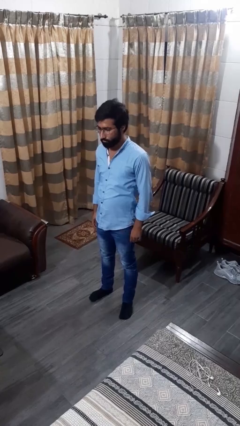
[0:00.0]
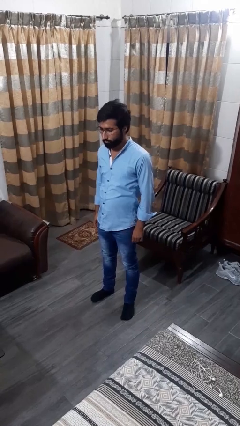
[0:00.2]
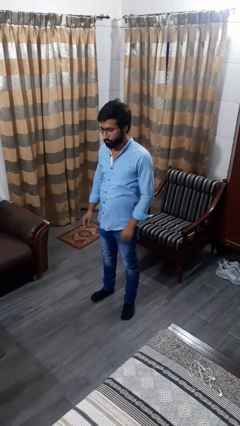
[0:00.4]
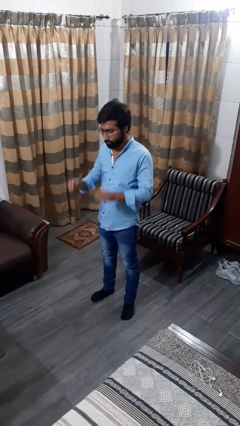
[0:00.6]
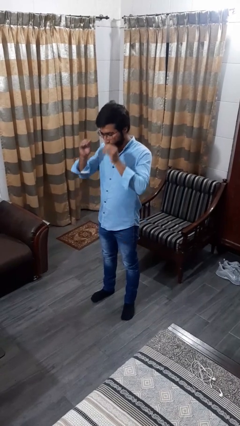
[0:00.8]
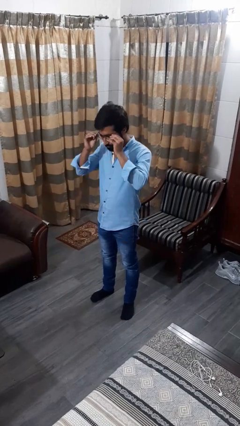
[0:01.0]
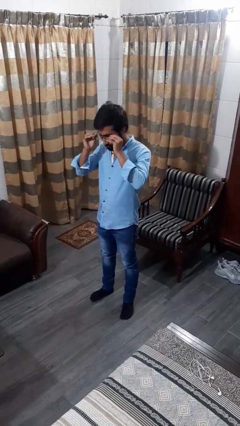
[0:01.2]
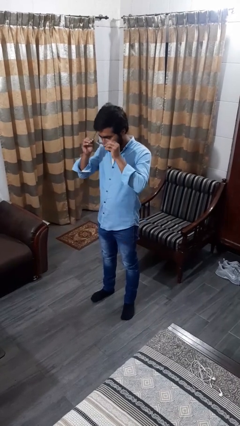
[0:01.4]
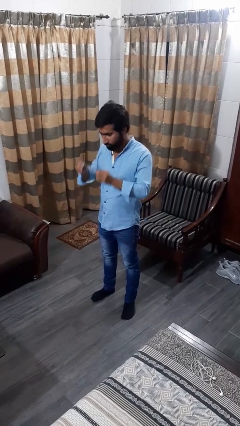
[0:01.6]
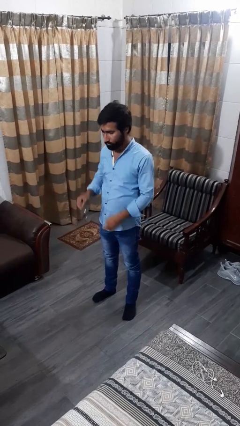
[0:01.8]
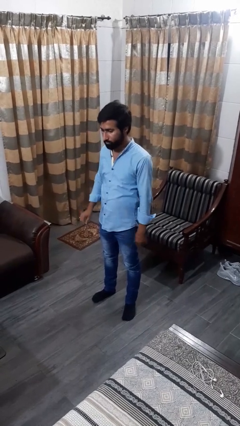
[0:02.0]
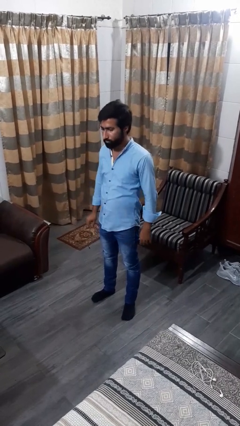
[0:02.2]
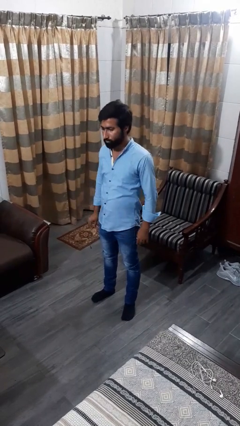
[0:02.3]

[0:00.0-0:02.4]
person takes off glasses

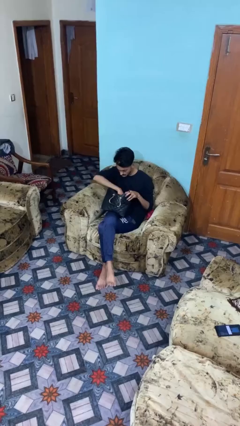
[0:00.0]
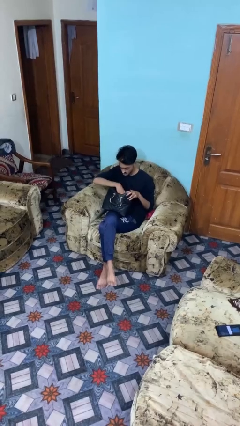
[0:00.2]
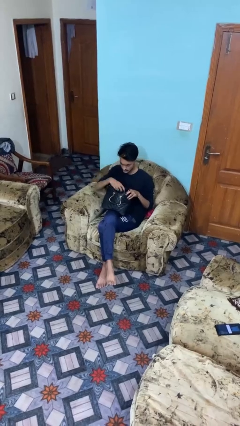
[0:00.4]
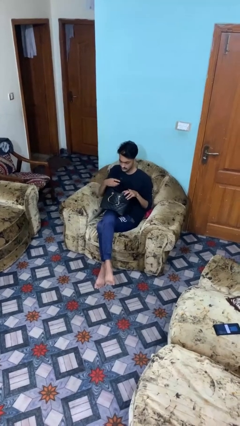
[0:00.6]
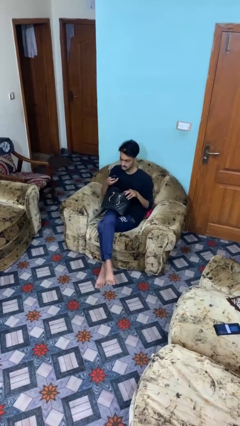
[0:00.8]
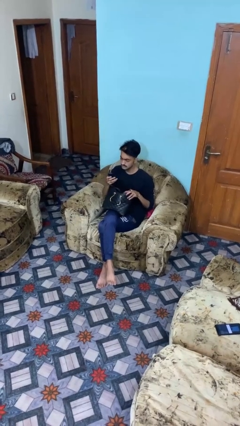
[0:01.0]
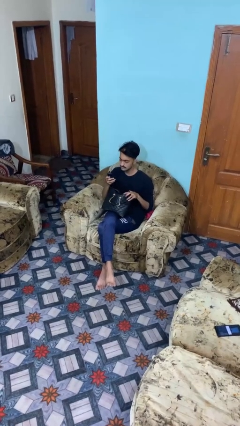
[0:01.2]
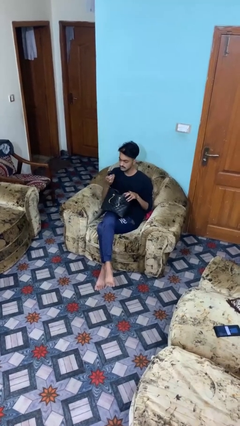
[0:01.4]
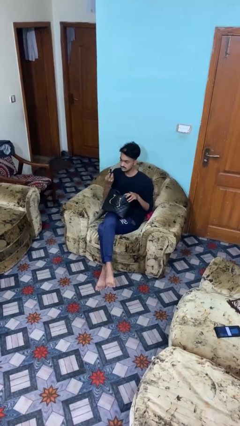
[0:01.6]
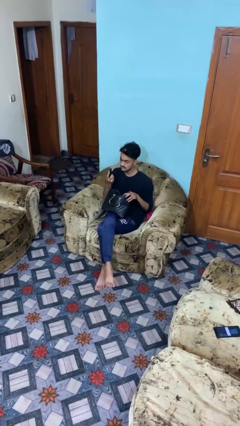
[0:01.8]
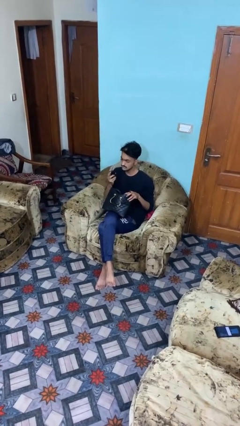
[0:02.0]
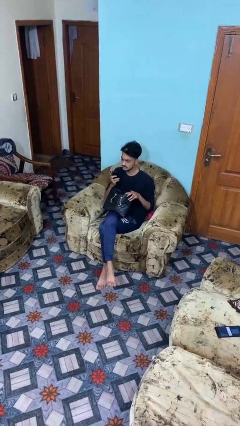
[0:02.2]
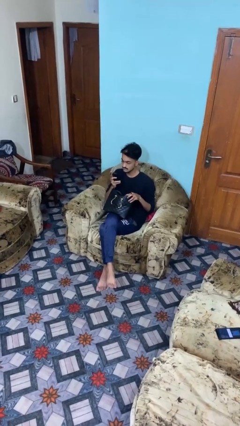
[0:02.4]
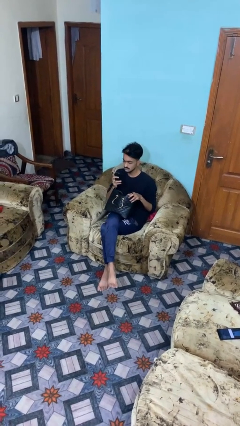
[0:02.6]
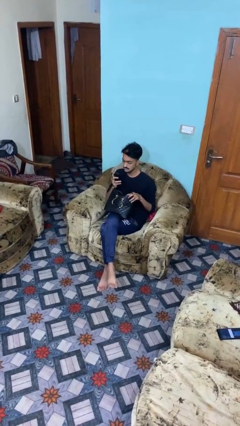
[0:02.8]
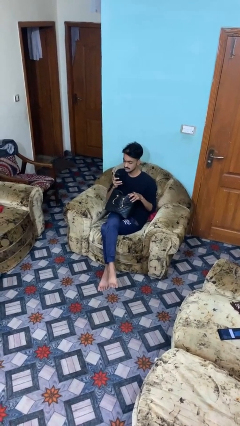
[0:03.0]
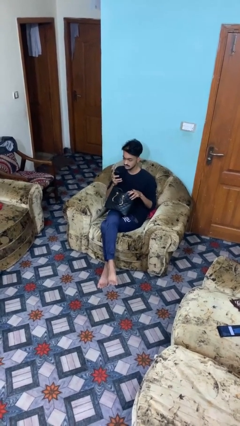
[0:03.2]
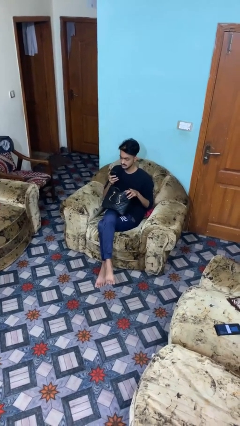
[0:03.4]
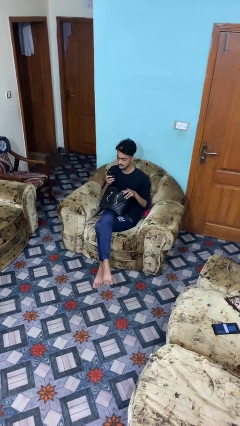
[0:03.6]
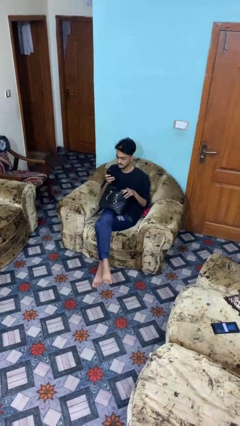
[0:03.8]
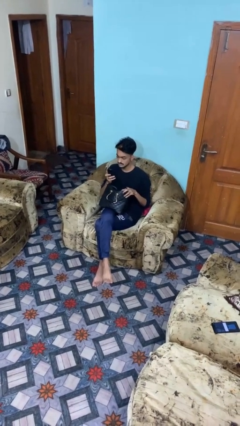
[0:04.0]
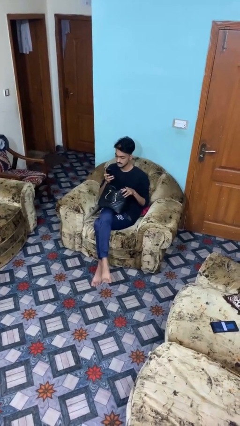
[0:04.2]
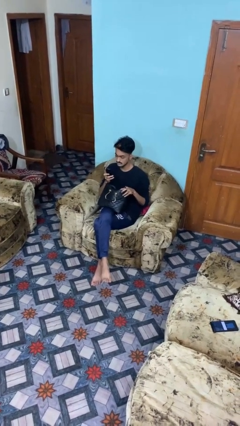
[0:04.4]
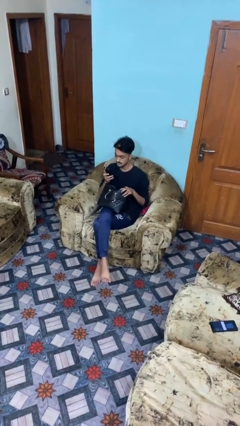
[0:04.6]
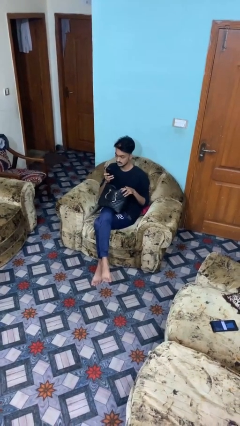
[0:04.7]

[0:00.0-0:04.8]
person takes object from purse

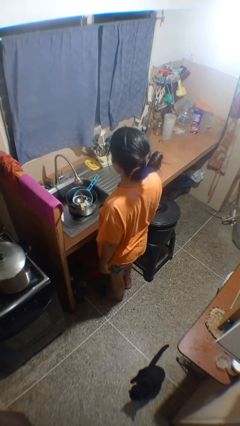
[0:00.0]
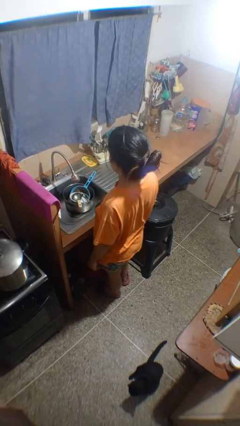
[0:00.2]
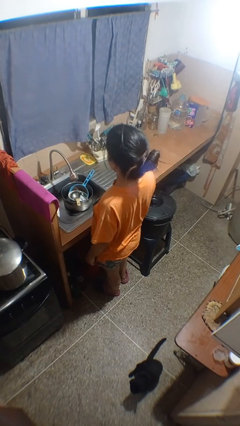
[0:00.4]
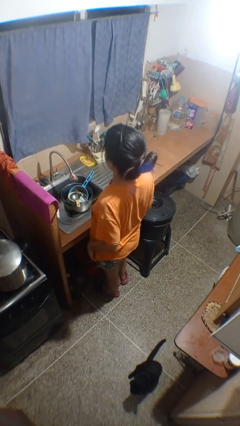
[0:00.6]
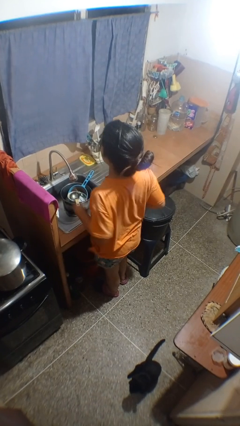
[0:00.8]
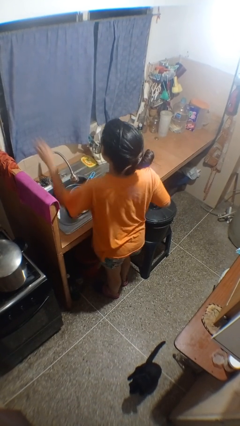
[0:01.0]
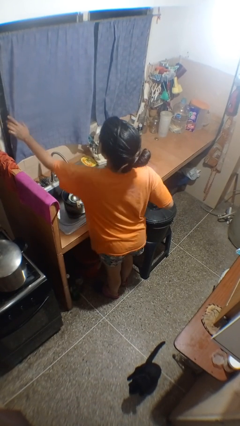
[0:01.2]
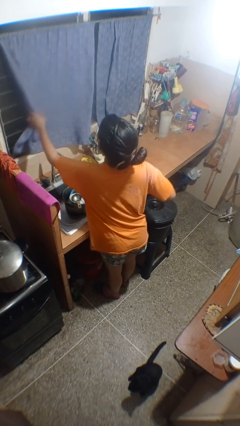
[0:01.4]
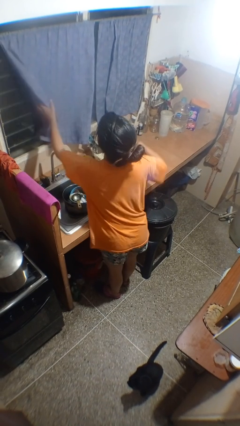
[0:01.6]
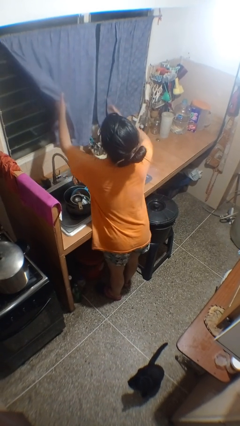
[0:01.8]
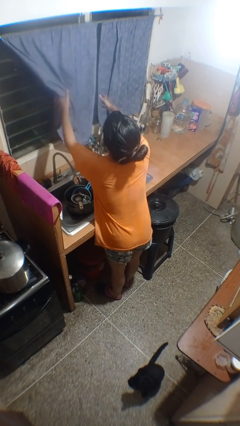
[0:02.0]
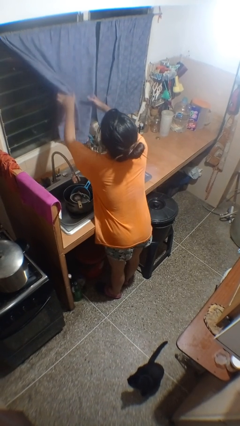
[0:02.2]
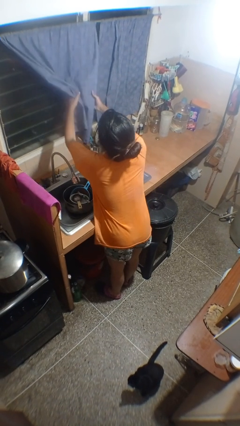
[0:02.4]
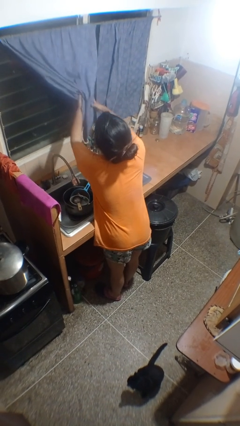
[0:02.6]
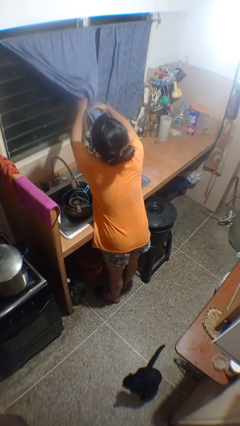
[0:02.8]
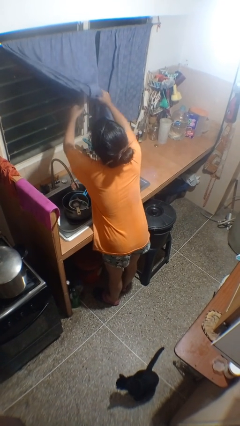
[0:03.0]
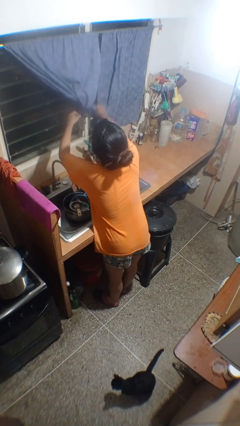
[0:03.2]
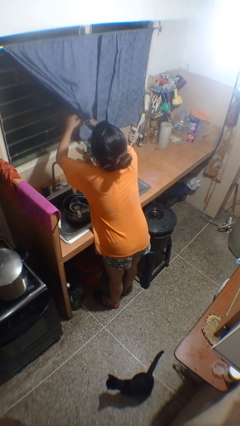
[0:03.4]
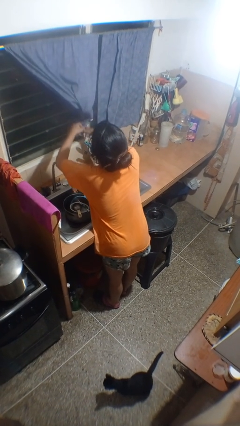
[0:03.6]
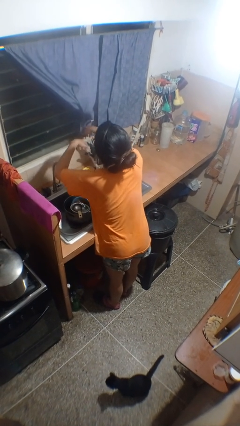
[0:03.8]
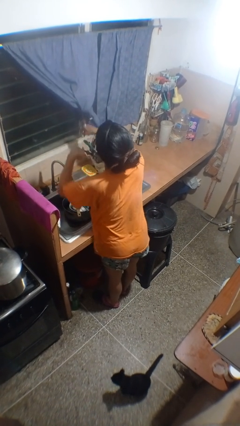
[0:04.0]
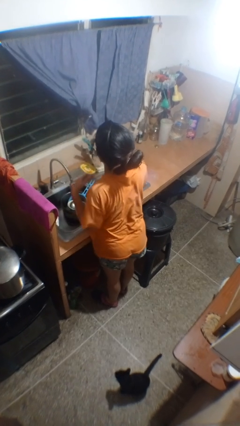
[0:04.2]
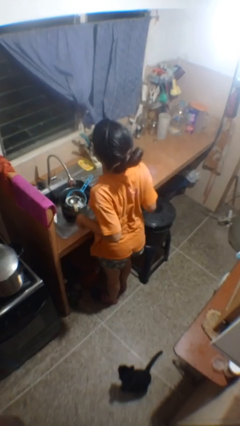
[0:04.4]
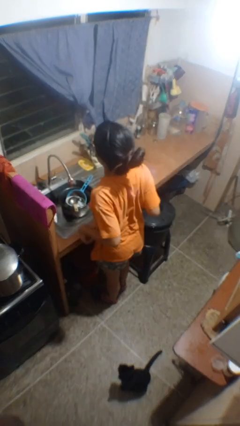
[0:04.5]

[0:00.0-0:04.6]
person opens curtains

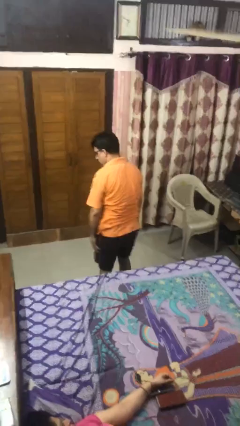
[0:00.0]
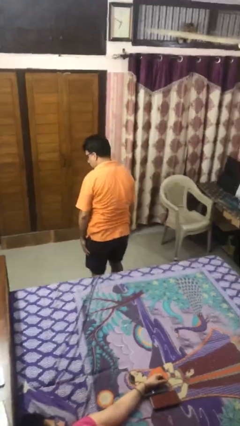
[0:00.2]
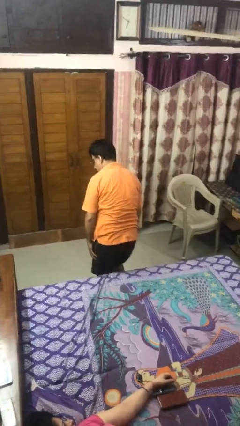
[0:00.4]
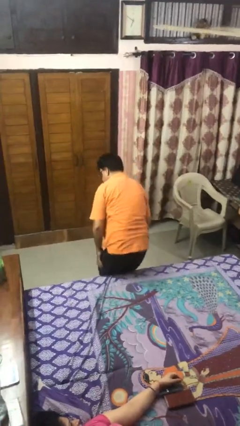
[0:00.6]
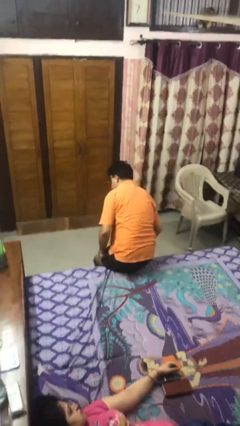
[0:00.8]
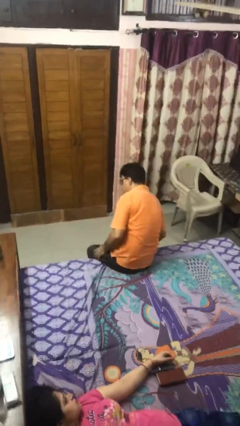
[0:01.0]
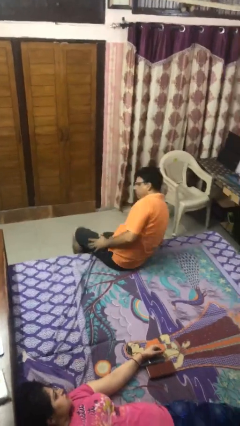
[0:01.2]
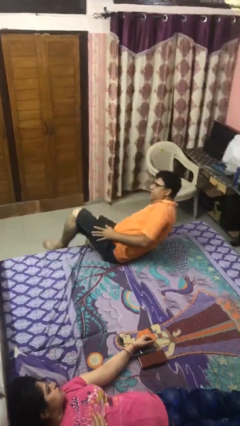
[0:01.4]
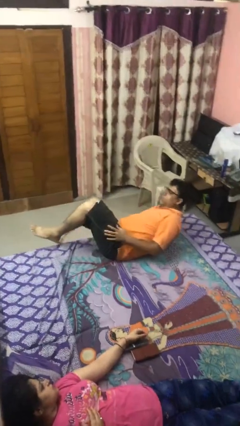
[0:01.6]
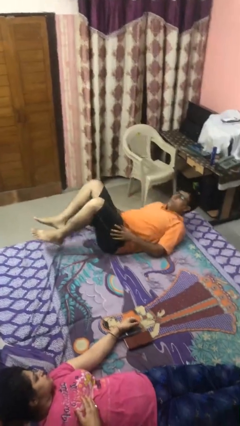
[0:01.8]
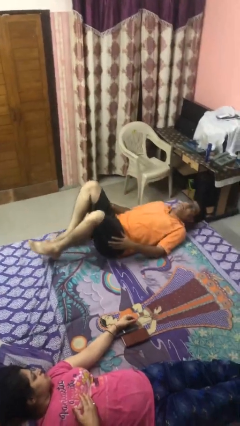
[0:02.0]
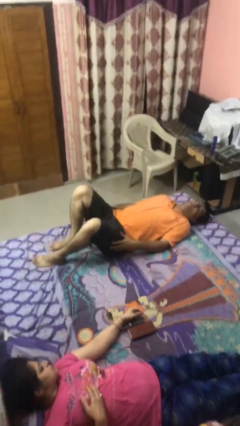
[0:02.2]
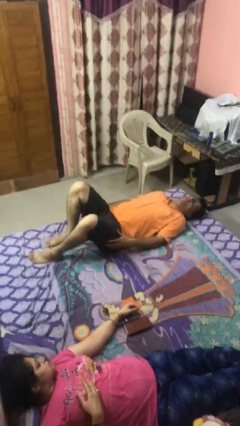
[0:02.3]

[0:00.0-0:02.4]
person lies down on bed

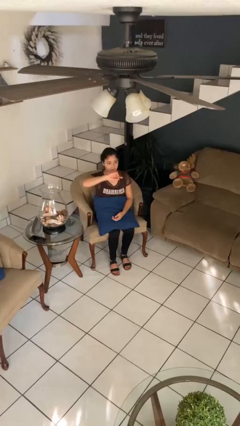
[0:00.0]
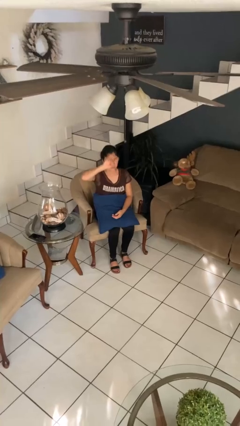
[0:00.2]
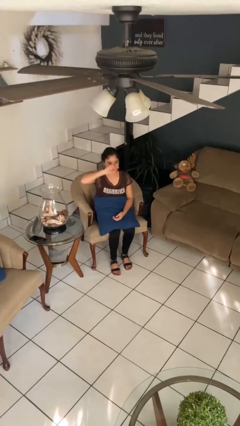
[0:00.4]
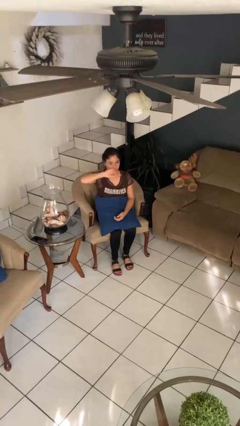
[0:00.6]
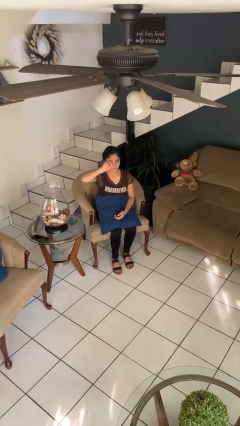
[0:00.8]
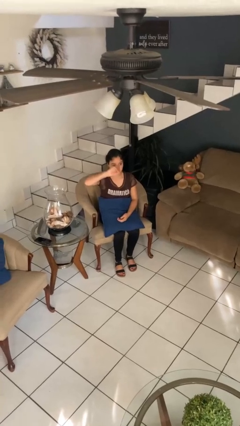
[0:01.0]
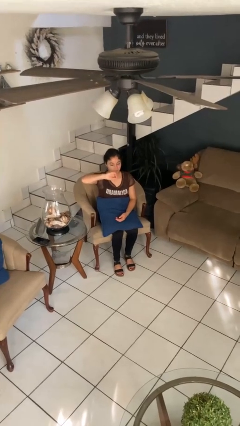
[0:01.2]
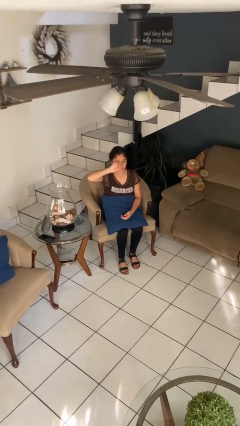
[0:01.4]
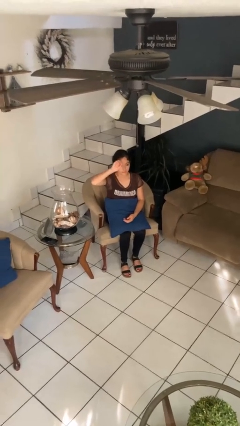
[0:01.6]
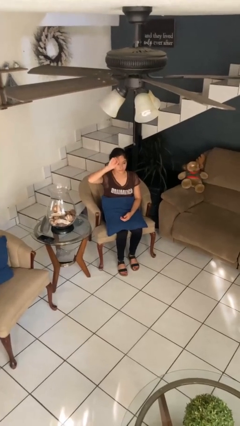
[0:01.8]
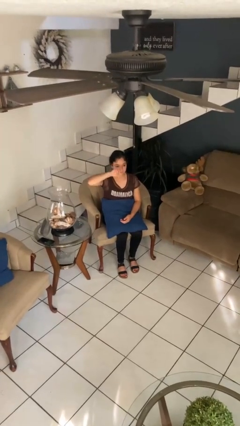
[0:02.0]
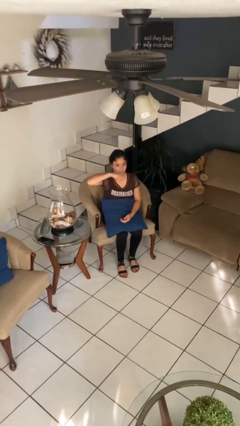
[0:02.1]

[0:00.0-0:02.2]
person gestures swipe up

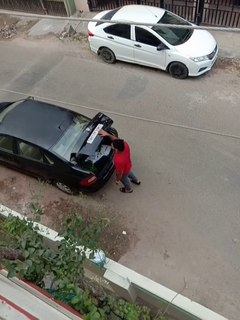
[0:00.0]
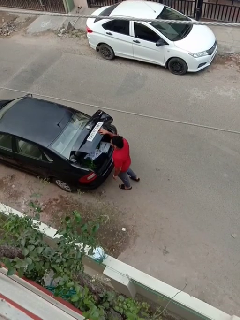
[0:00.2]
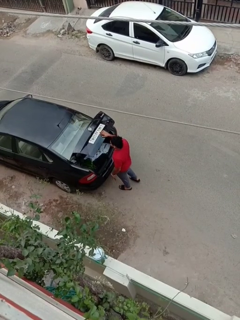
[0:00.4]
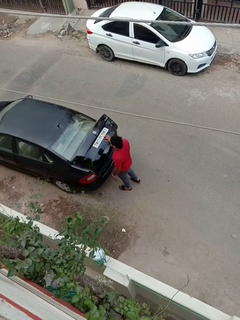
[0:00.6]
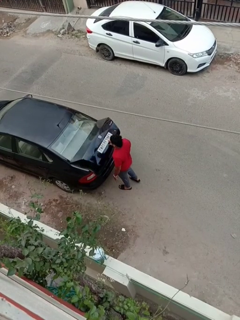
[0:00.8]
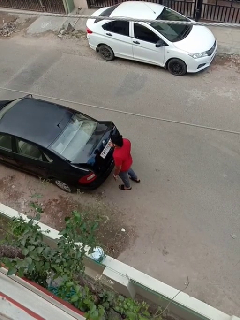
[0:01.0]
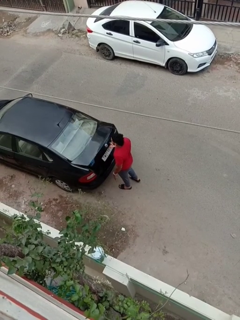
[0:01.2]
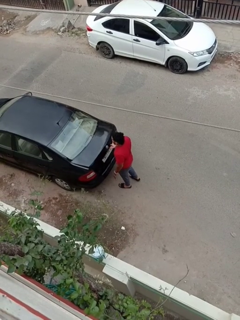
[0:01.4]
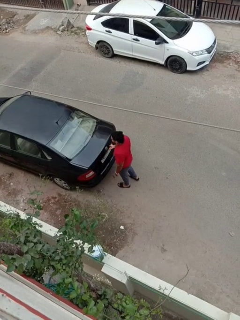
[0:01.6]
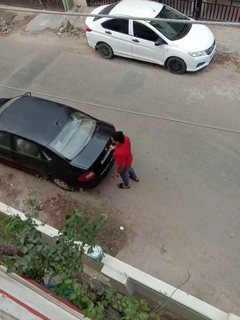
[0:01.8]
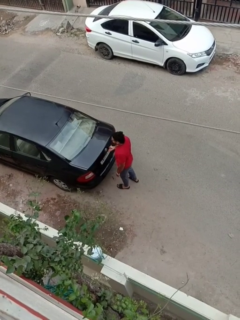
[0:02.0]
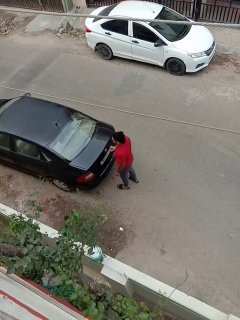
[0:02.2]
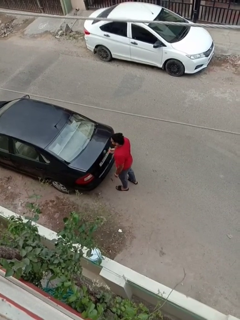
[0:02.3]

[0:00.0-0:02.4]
person closes car trunk
